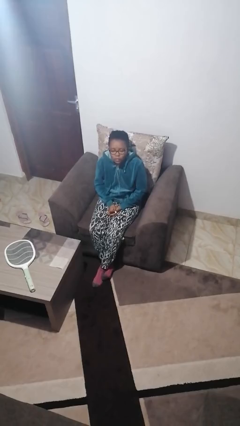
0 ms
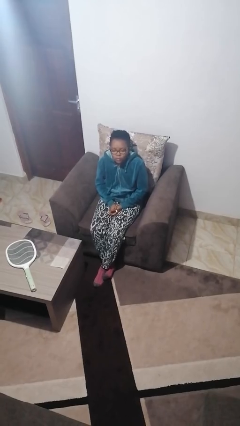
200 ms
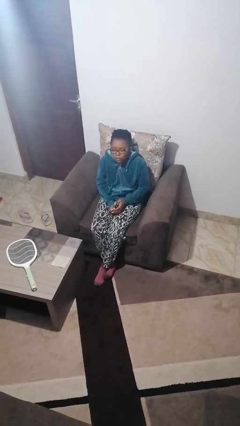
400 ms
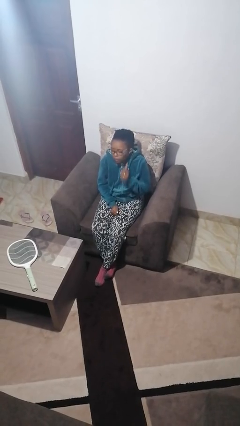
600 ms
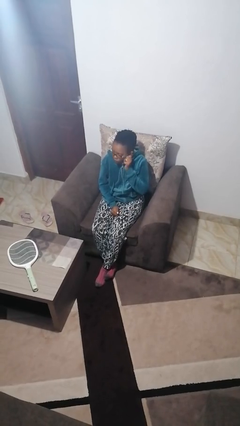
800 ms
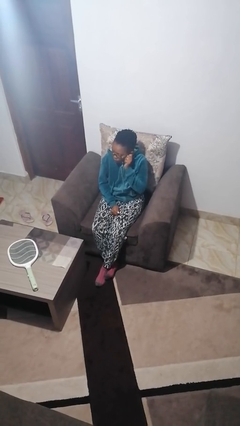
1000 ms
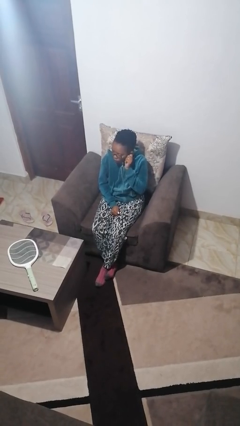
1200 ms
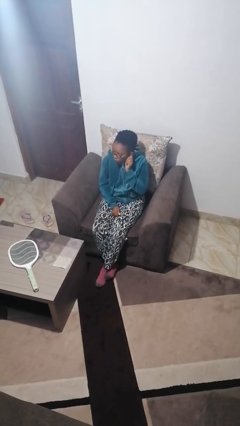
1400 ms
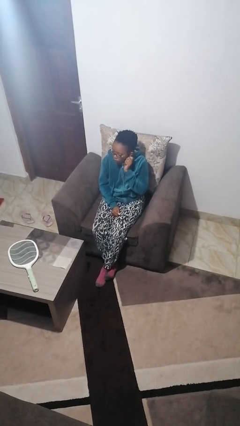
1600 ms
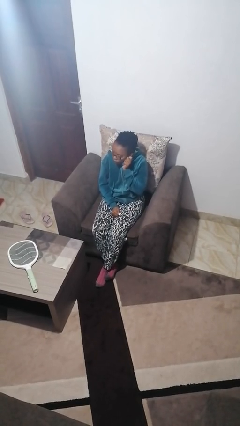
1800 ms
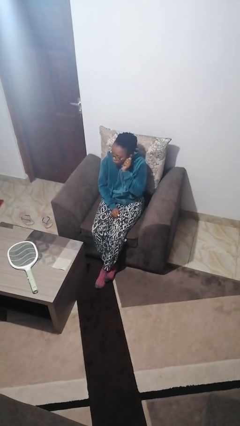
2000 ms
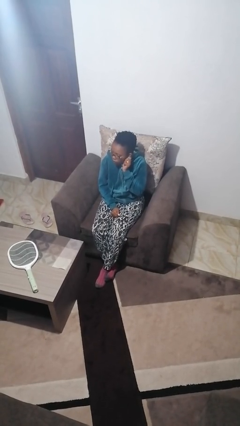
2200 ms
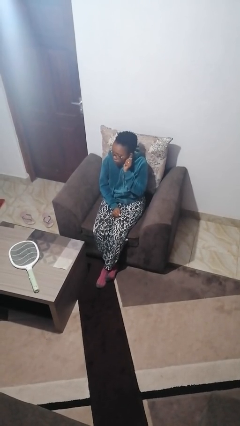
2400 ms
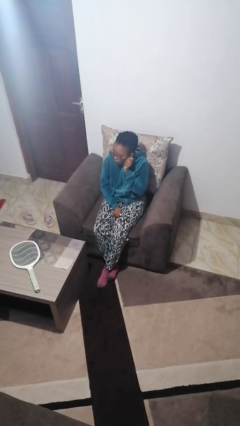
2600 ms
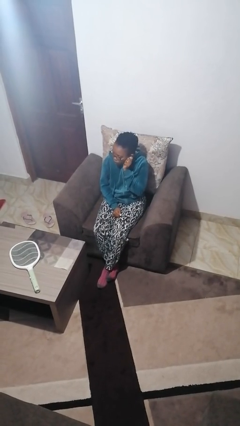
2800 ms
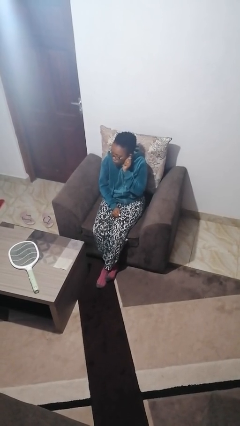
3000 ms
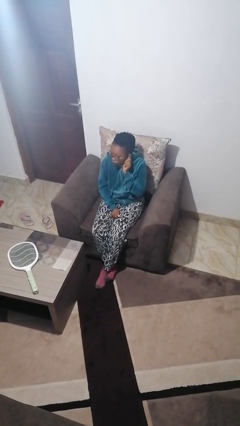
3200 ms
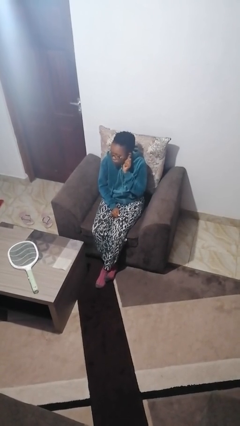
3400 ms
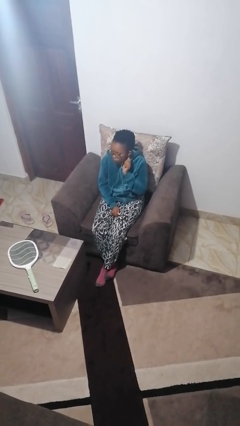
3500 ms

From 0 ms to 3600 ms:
person touches earlobe

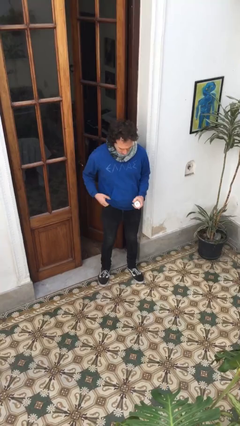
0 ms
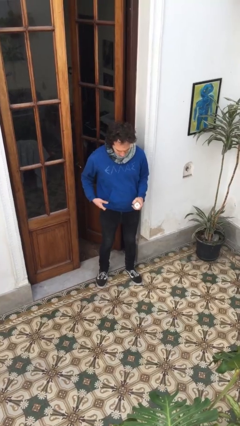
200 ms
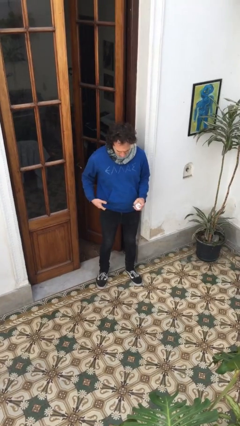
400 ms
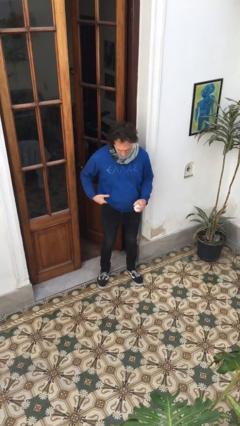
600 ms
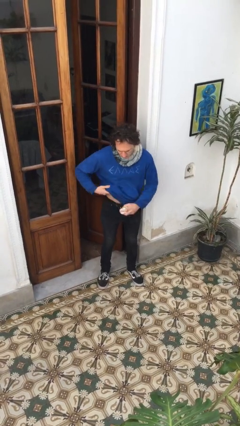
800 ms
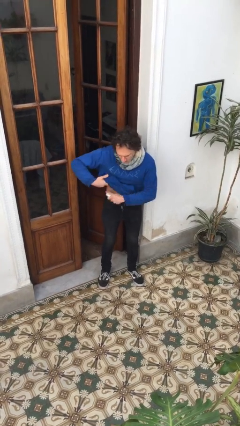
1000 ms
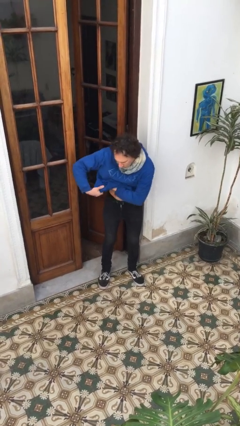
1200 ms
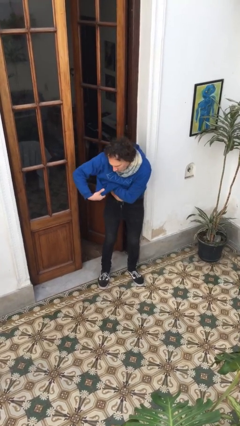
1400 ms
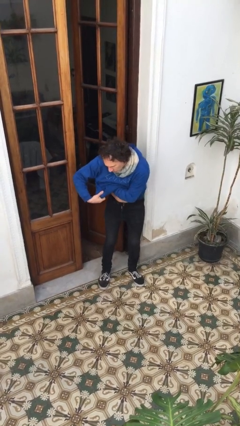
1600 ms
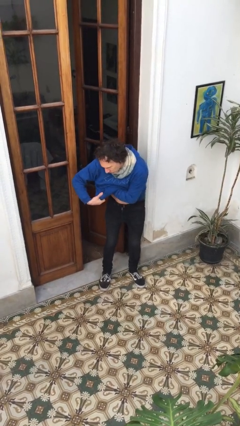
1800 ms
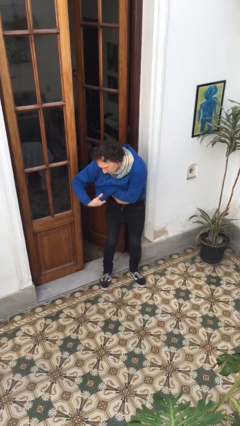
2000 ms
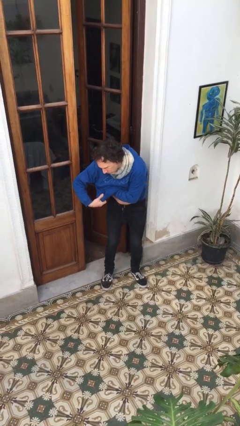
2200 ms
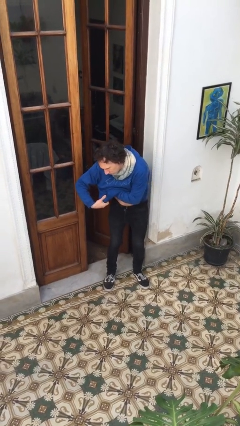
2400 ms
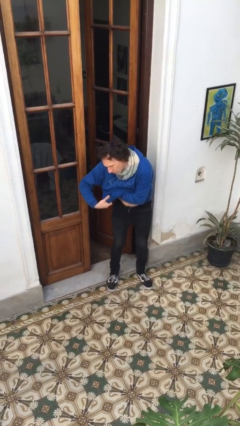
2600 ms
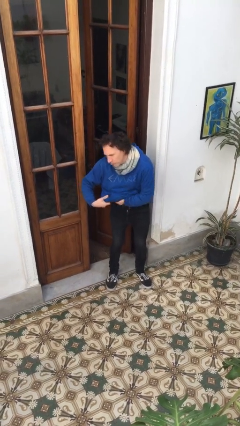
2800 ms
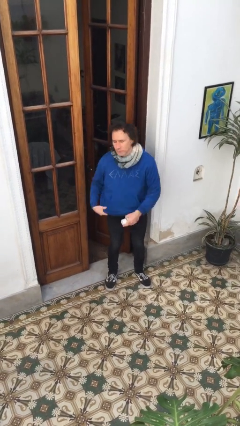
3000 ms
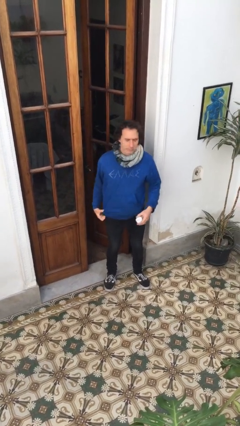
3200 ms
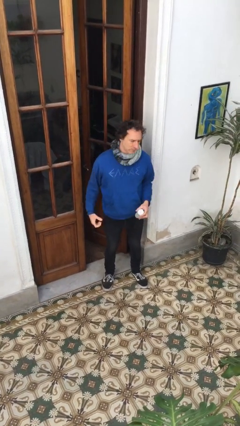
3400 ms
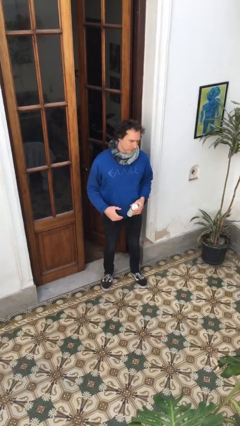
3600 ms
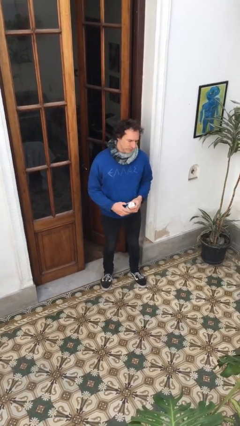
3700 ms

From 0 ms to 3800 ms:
person applies deodorant

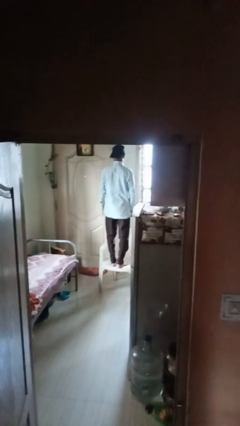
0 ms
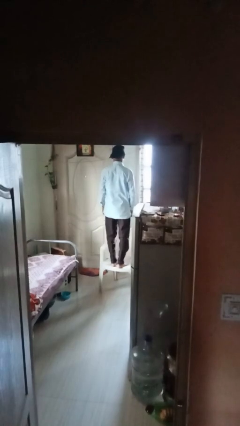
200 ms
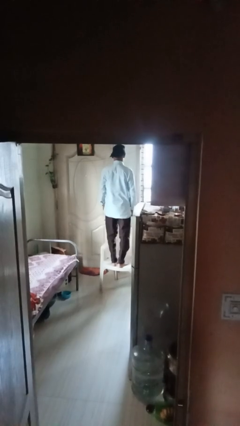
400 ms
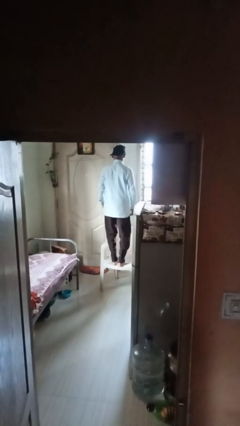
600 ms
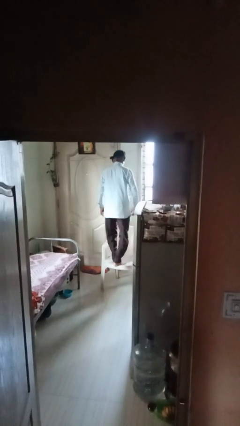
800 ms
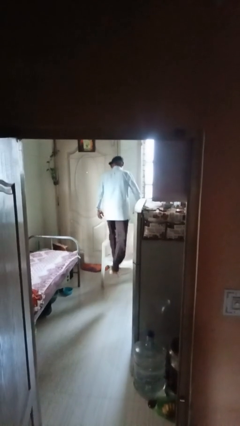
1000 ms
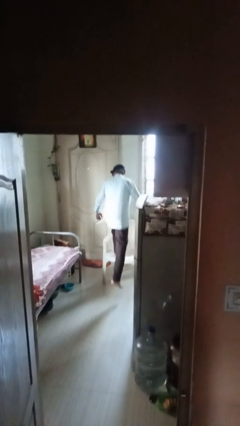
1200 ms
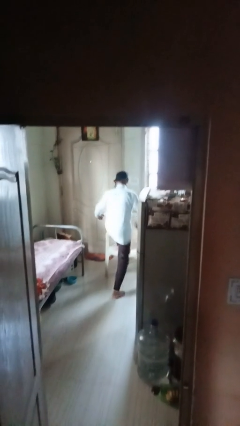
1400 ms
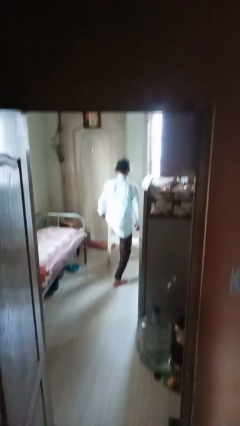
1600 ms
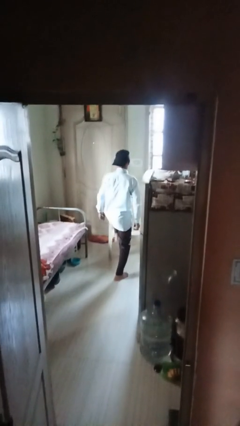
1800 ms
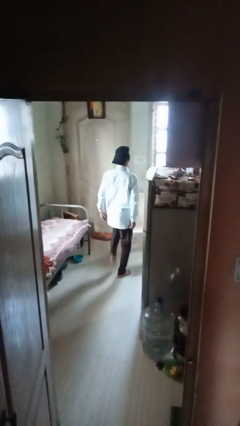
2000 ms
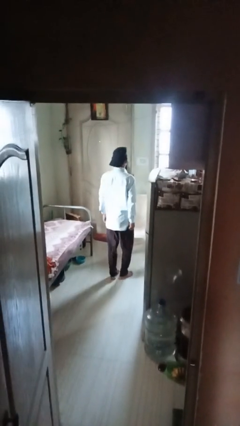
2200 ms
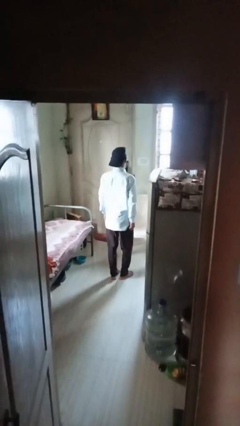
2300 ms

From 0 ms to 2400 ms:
person climbs off chair

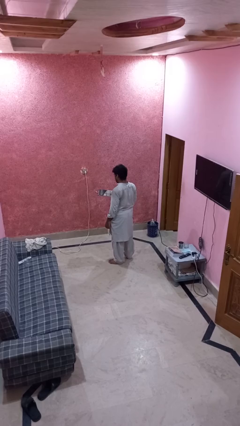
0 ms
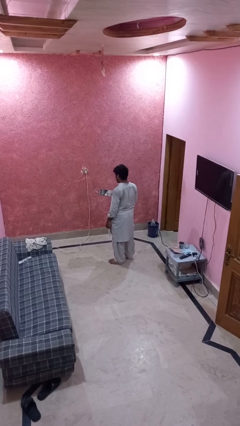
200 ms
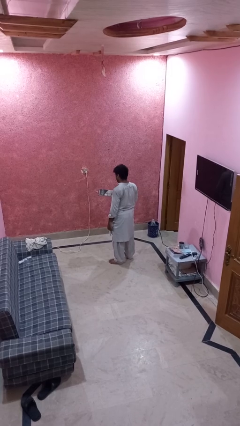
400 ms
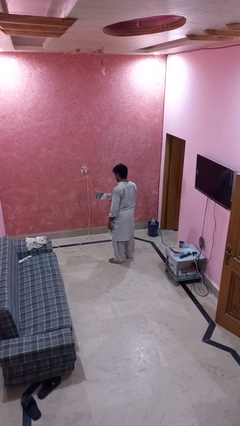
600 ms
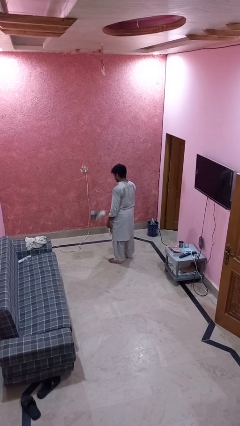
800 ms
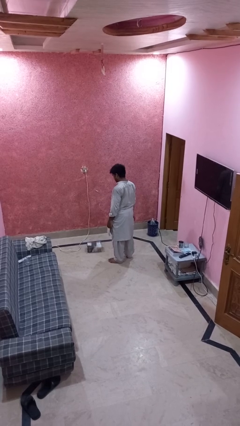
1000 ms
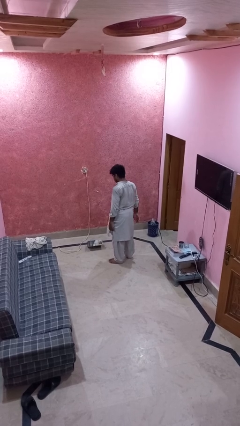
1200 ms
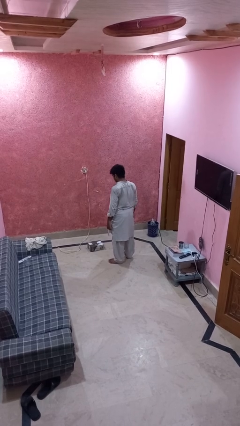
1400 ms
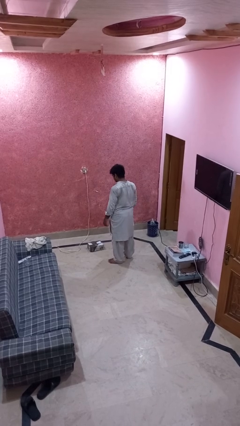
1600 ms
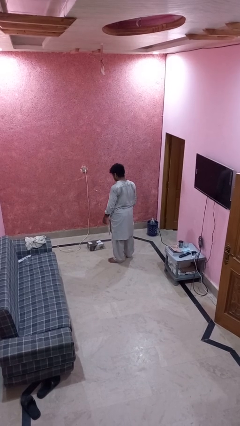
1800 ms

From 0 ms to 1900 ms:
person throws object to ground

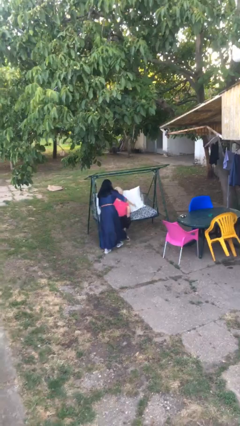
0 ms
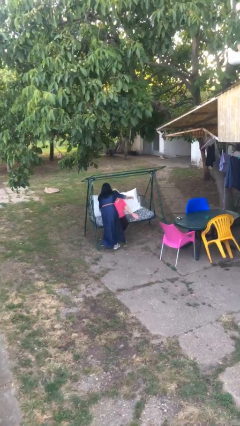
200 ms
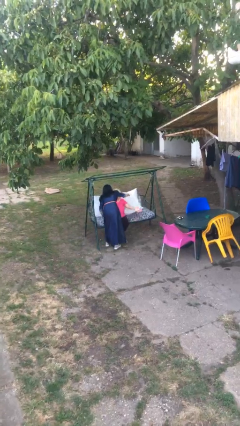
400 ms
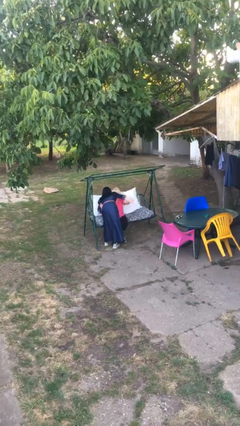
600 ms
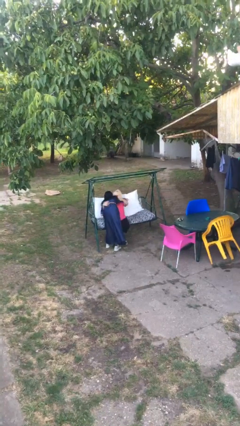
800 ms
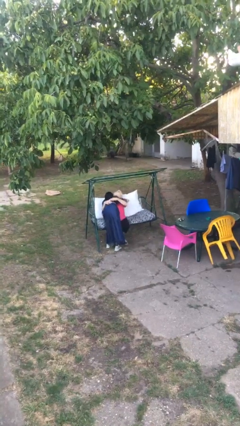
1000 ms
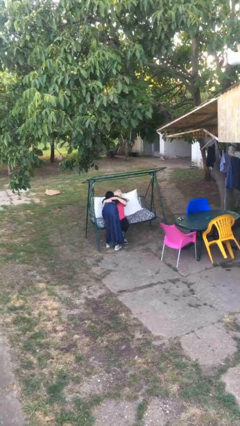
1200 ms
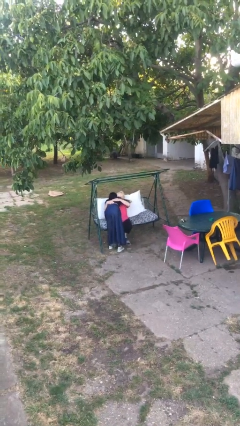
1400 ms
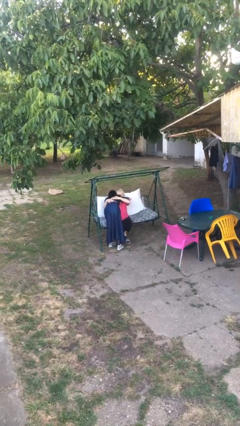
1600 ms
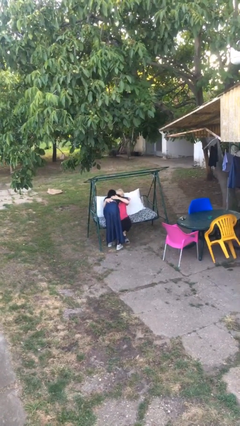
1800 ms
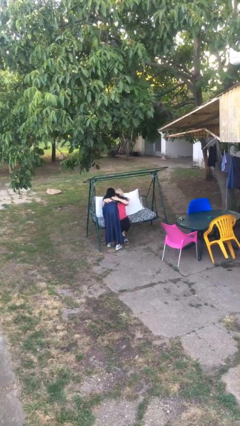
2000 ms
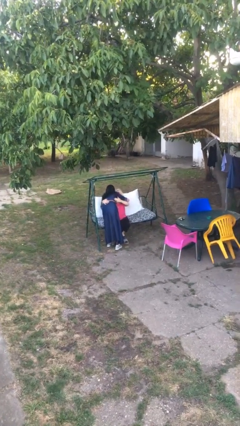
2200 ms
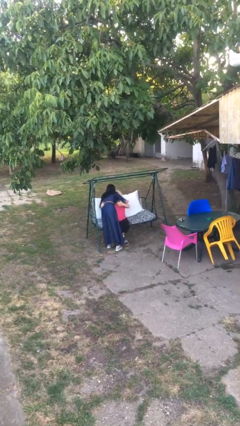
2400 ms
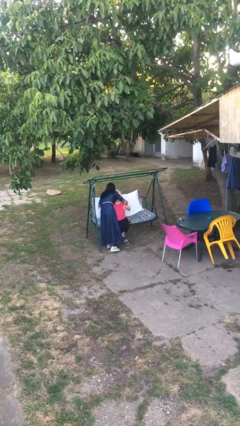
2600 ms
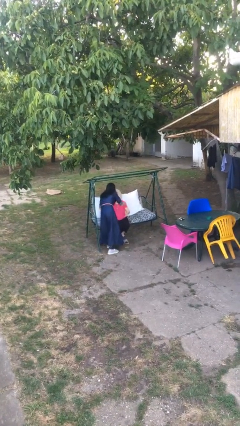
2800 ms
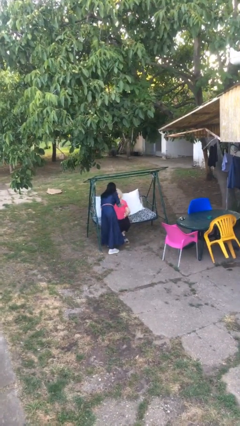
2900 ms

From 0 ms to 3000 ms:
person embraces person

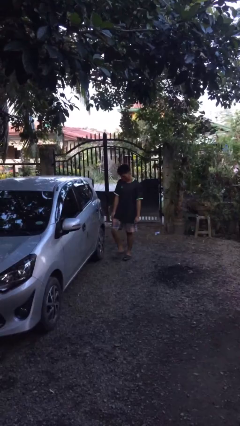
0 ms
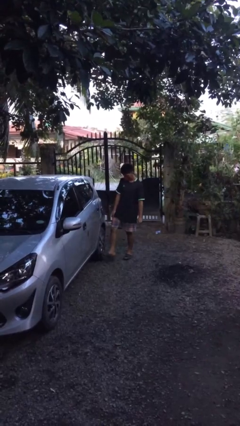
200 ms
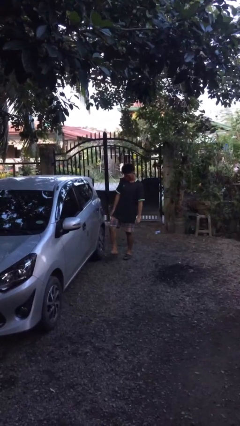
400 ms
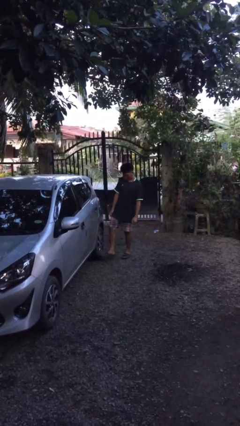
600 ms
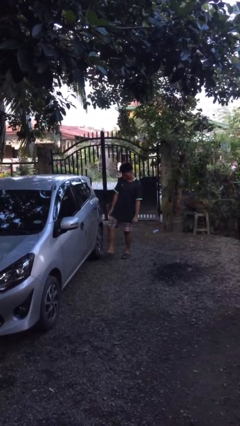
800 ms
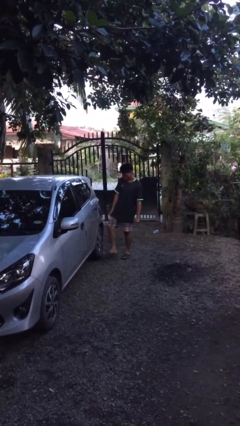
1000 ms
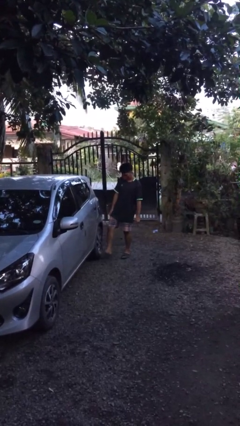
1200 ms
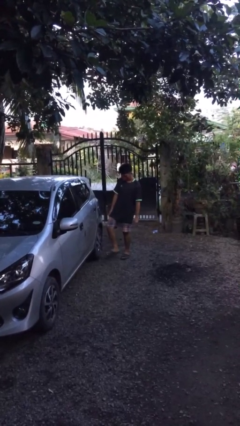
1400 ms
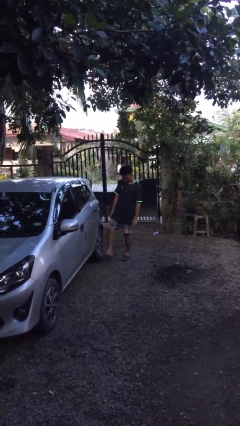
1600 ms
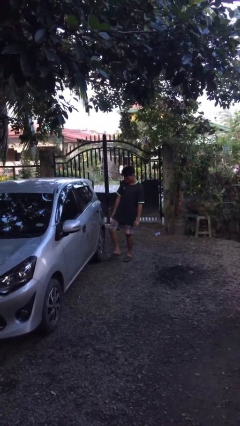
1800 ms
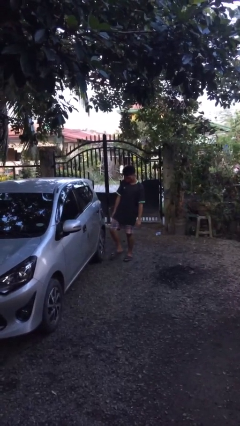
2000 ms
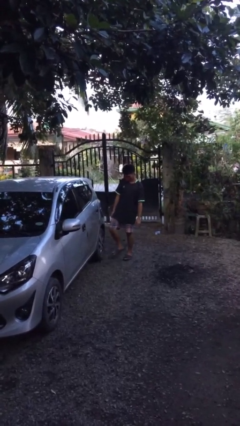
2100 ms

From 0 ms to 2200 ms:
person kicks car tires

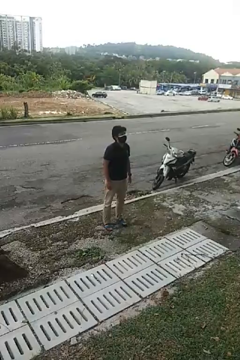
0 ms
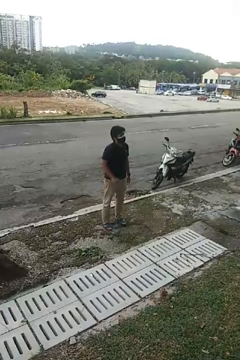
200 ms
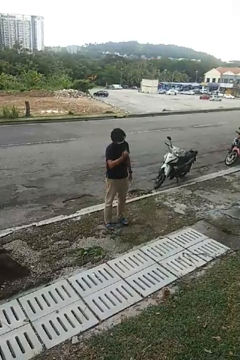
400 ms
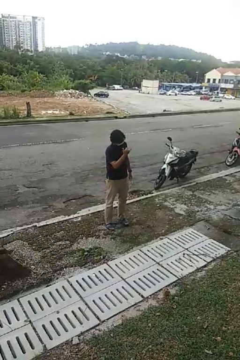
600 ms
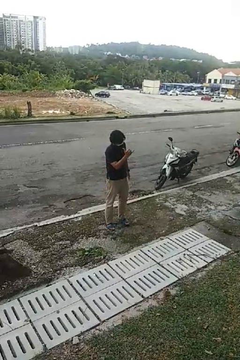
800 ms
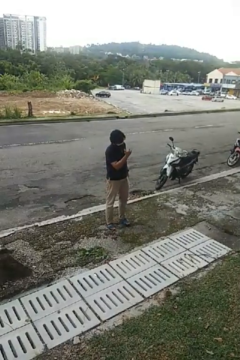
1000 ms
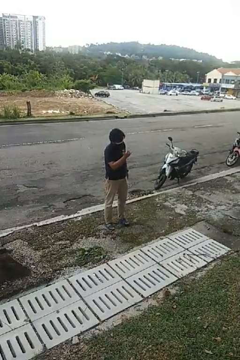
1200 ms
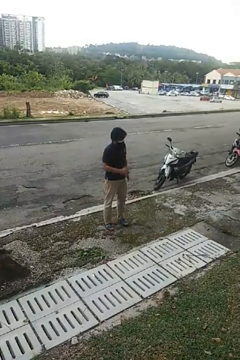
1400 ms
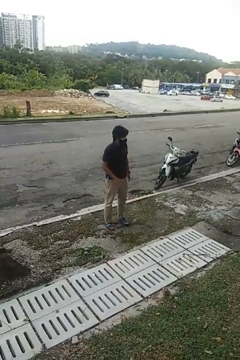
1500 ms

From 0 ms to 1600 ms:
person gestures hang loose
